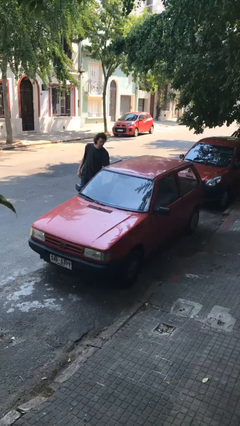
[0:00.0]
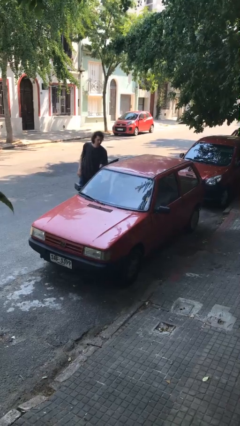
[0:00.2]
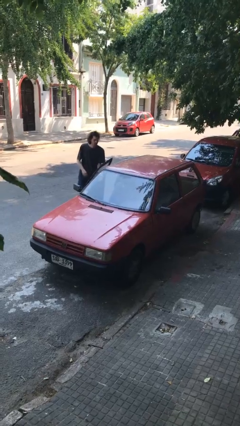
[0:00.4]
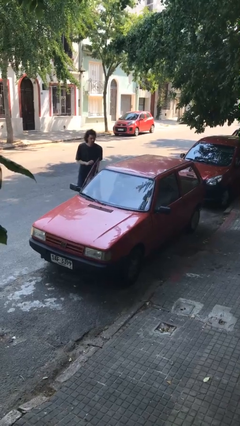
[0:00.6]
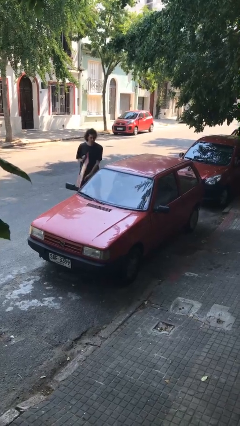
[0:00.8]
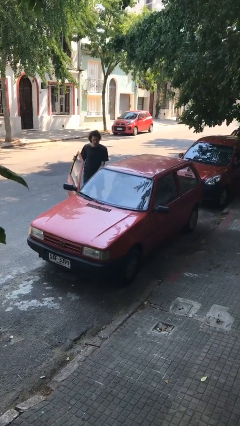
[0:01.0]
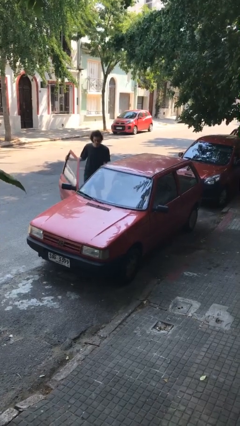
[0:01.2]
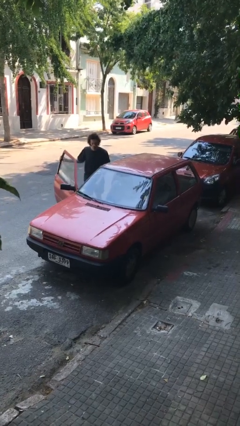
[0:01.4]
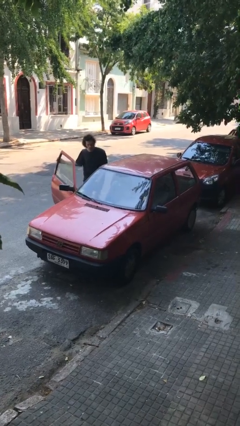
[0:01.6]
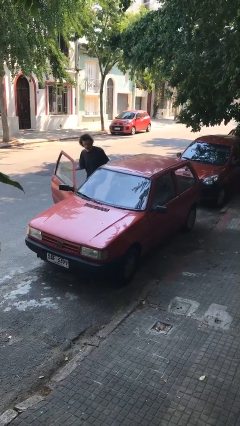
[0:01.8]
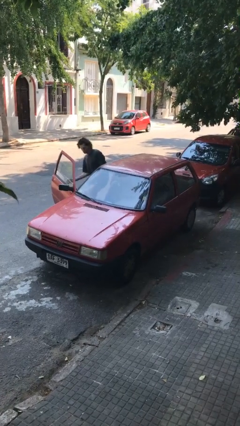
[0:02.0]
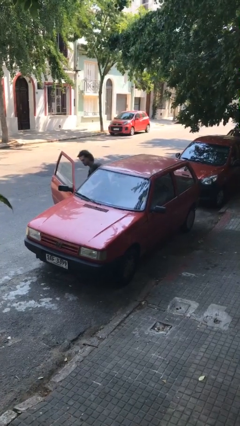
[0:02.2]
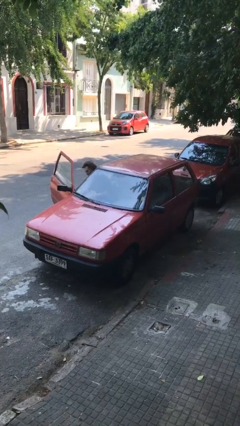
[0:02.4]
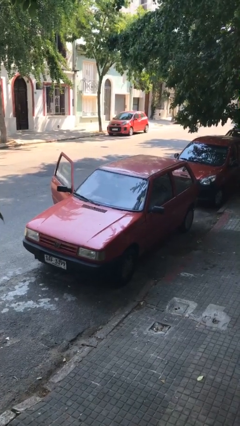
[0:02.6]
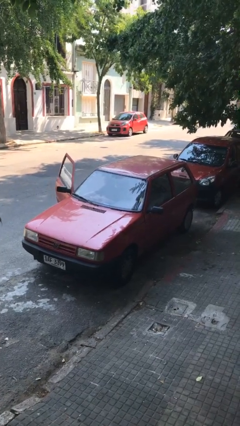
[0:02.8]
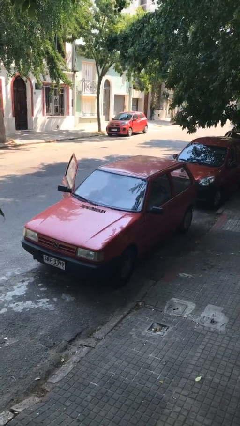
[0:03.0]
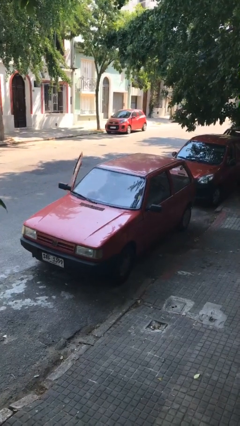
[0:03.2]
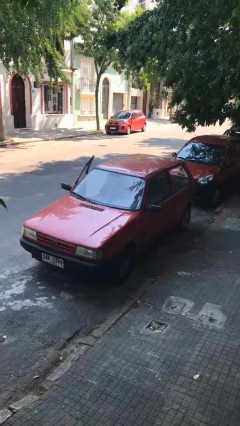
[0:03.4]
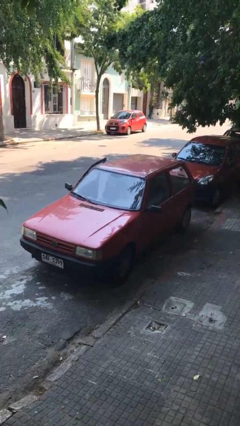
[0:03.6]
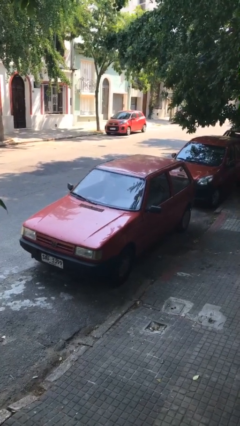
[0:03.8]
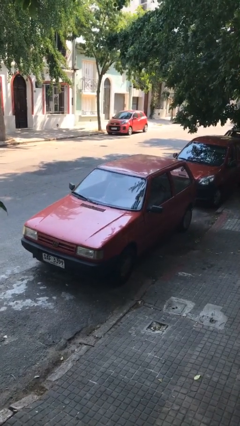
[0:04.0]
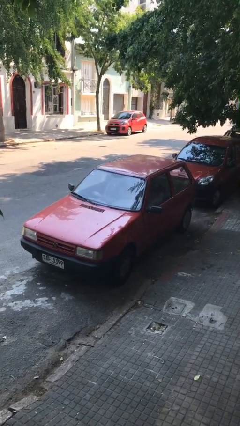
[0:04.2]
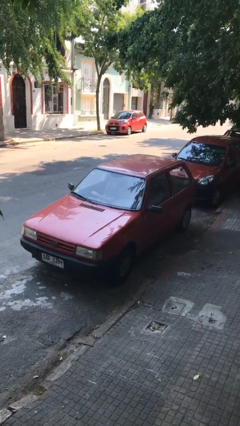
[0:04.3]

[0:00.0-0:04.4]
car picks up person

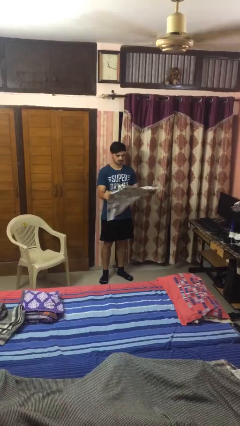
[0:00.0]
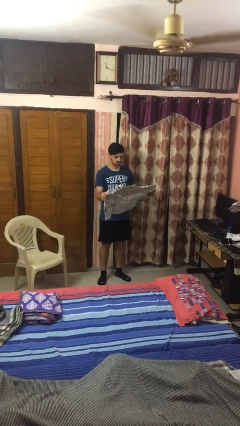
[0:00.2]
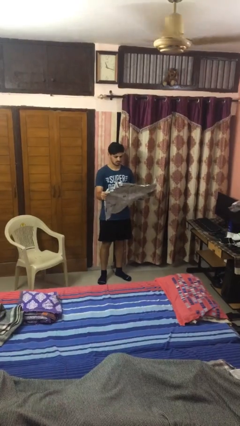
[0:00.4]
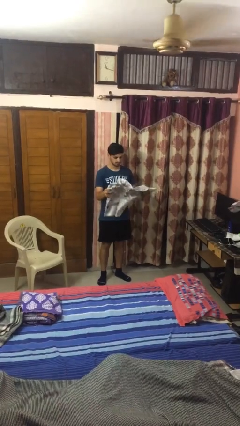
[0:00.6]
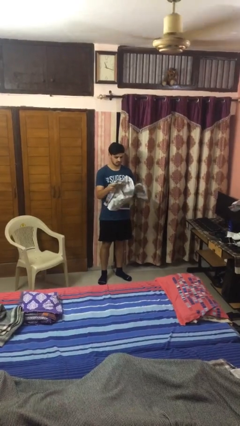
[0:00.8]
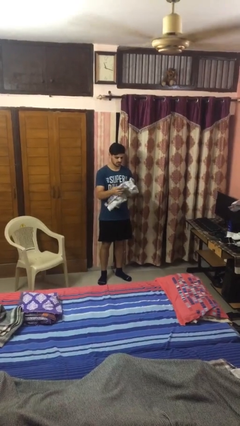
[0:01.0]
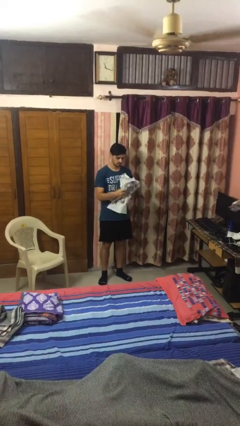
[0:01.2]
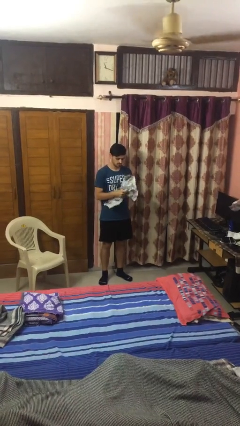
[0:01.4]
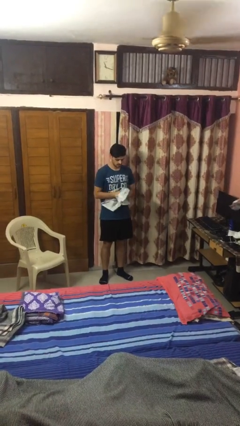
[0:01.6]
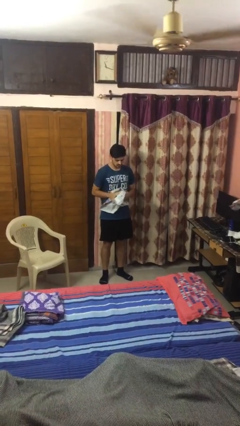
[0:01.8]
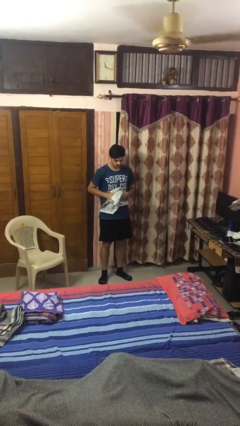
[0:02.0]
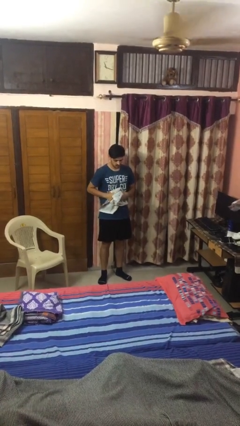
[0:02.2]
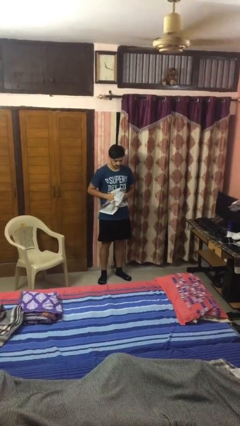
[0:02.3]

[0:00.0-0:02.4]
person crumples paper

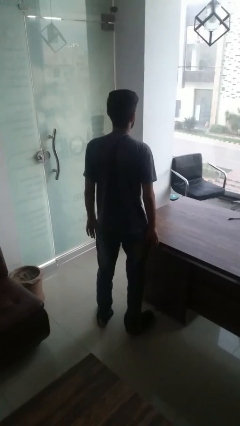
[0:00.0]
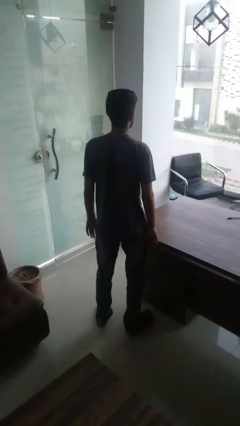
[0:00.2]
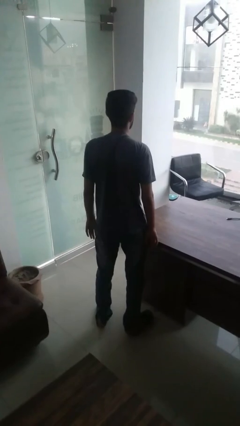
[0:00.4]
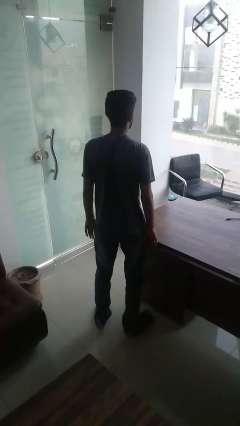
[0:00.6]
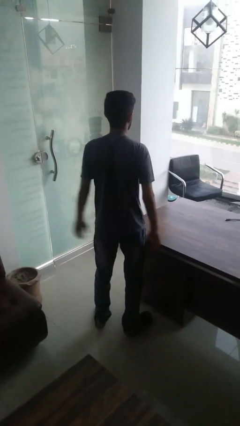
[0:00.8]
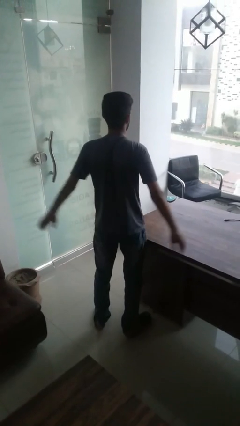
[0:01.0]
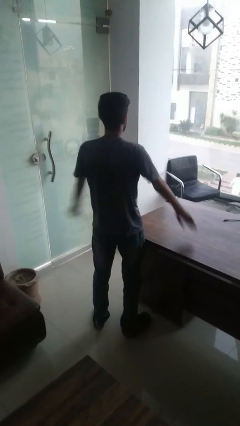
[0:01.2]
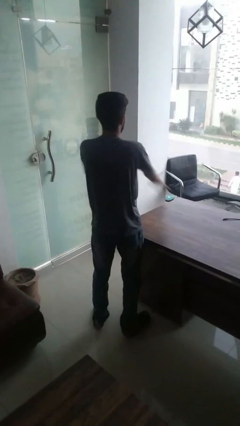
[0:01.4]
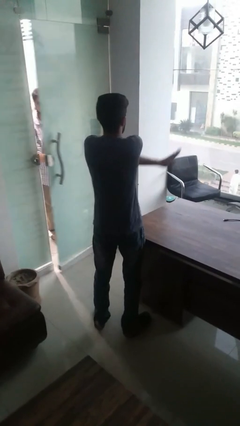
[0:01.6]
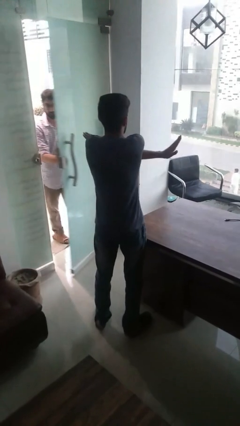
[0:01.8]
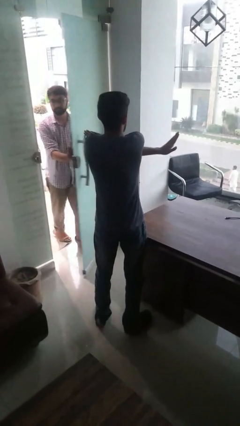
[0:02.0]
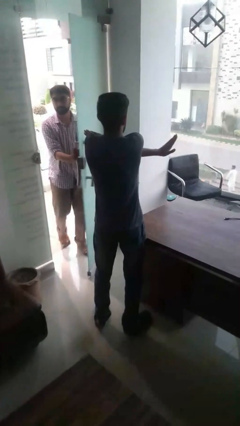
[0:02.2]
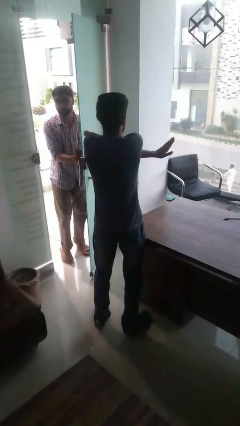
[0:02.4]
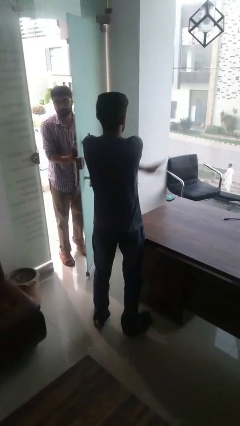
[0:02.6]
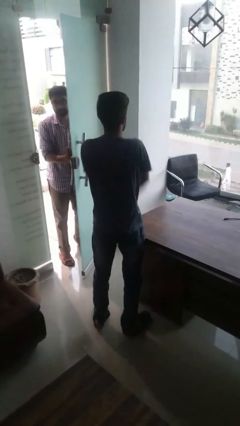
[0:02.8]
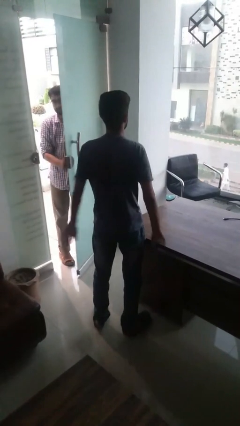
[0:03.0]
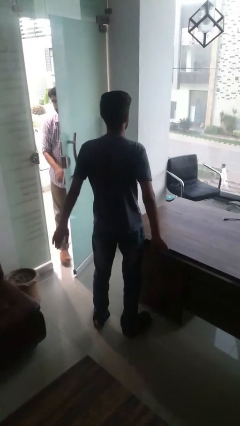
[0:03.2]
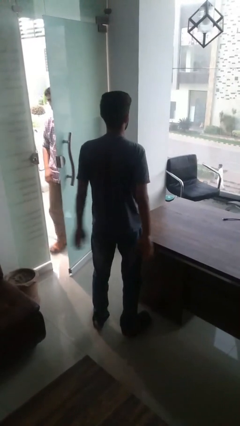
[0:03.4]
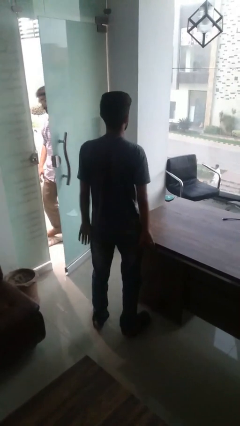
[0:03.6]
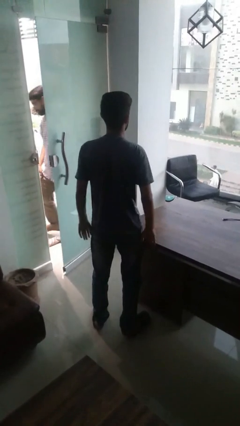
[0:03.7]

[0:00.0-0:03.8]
person gestures arms x

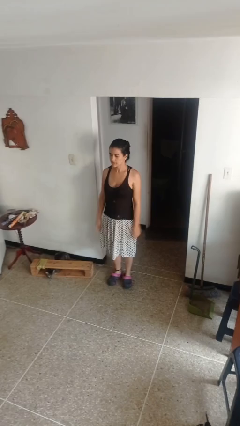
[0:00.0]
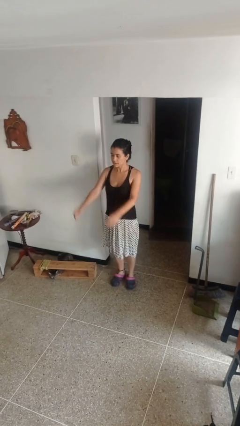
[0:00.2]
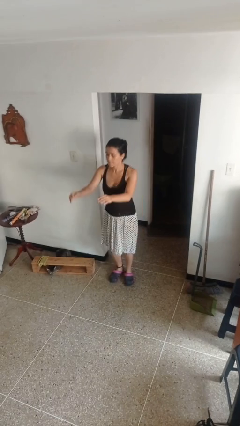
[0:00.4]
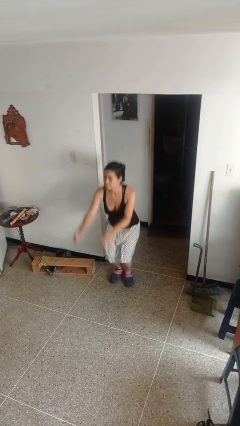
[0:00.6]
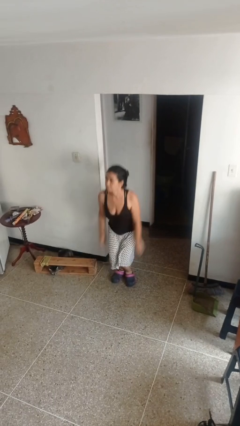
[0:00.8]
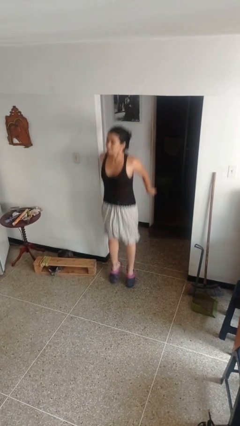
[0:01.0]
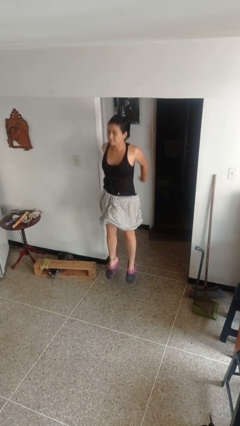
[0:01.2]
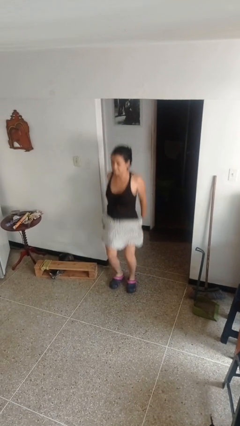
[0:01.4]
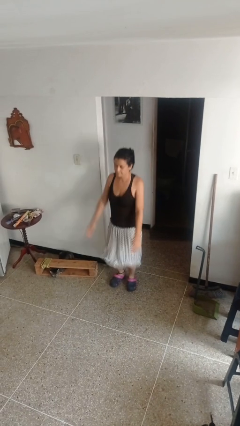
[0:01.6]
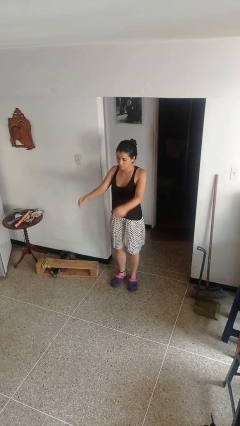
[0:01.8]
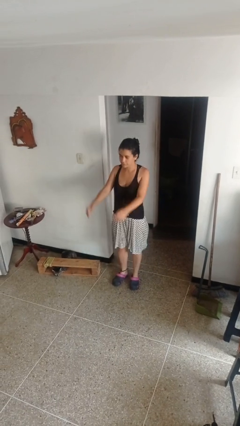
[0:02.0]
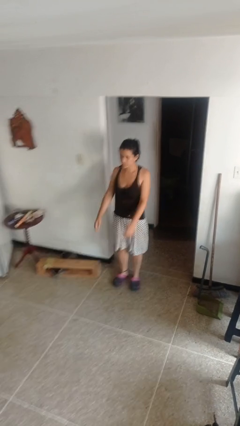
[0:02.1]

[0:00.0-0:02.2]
person jumps

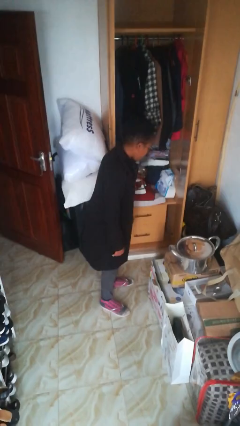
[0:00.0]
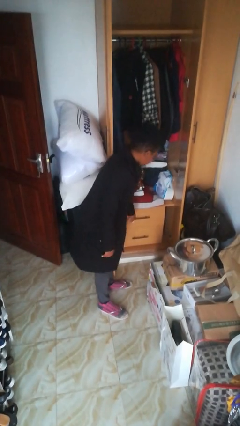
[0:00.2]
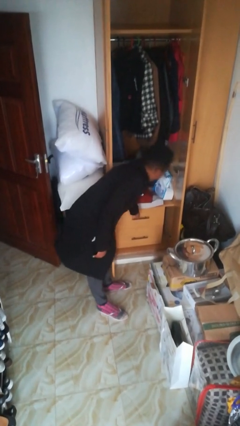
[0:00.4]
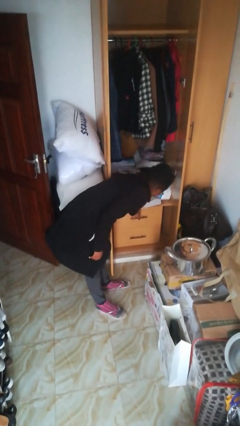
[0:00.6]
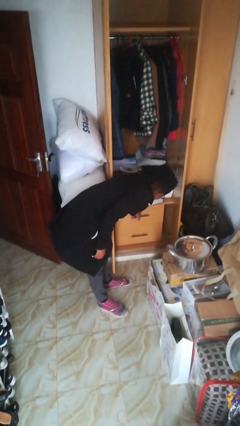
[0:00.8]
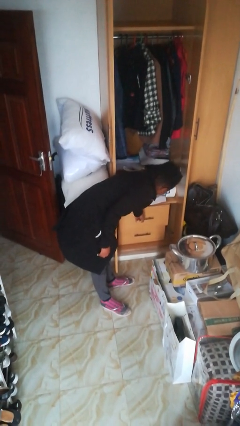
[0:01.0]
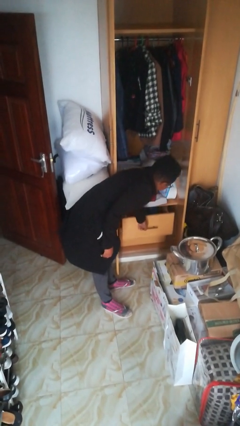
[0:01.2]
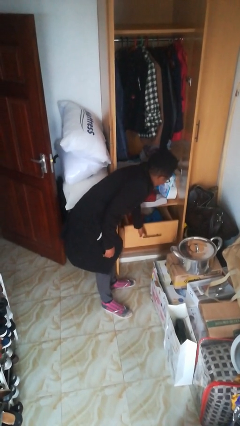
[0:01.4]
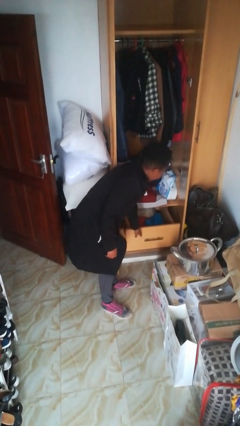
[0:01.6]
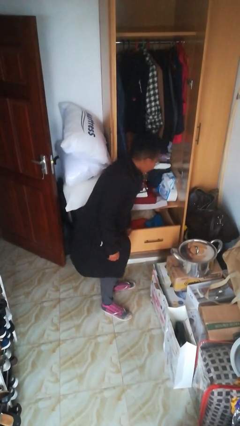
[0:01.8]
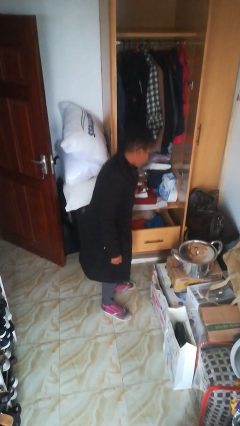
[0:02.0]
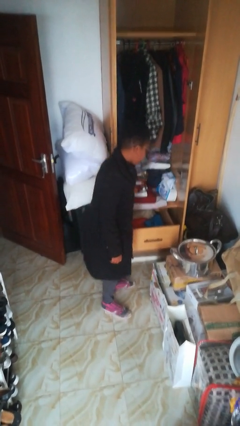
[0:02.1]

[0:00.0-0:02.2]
person opens dresser drawer

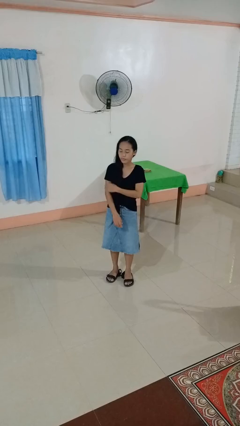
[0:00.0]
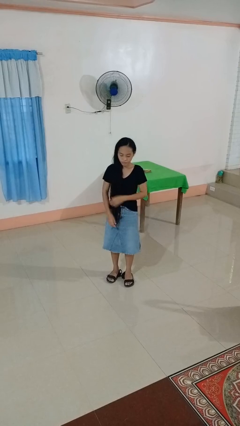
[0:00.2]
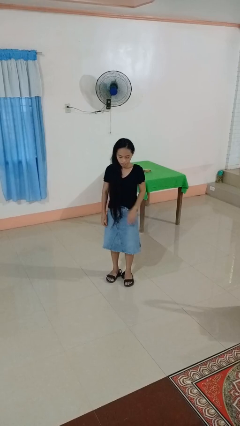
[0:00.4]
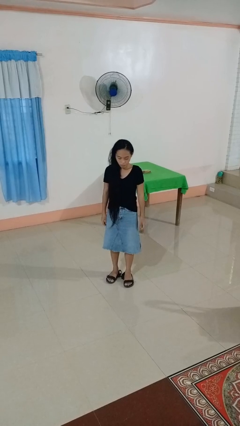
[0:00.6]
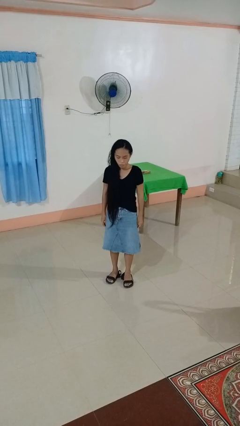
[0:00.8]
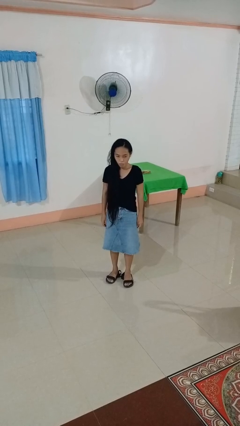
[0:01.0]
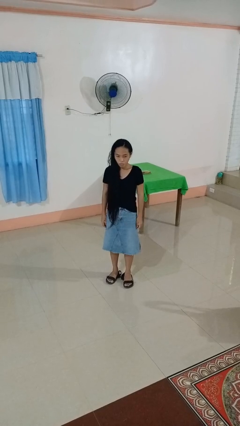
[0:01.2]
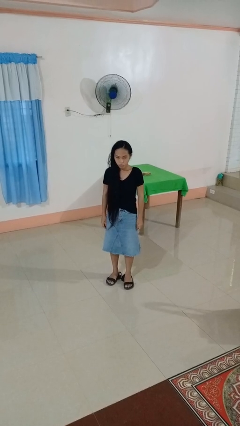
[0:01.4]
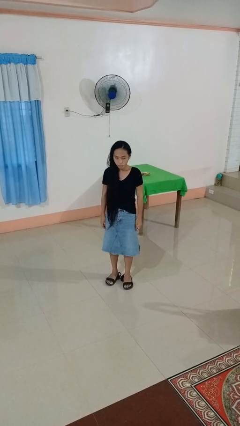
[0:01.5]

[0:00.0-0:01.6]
person swats bug

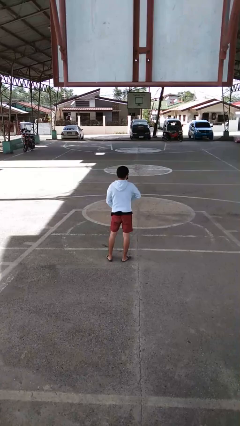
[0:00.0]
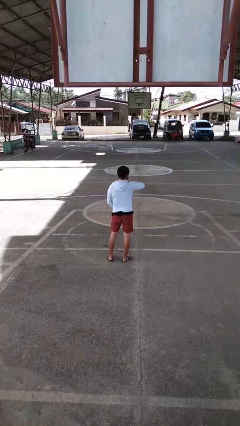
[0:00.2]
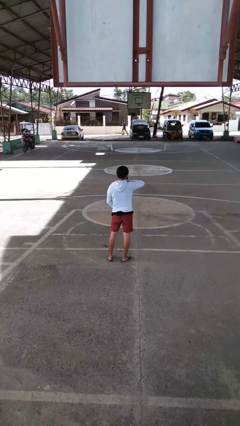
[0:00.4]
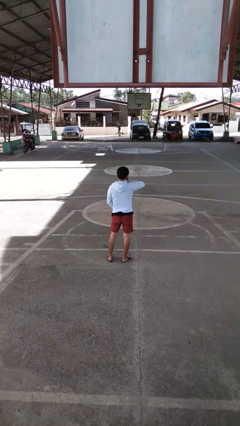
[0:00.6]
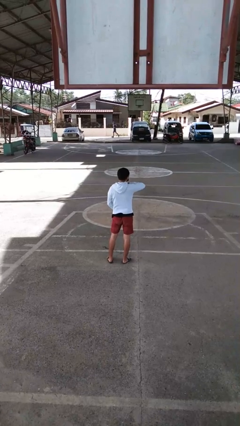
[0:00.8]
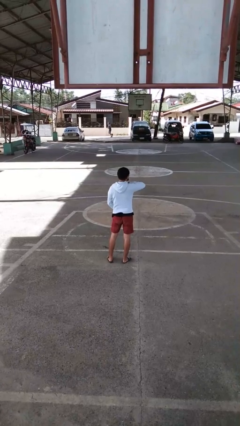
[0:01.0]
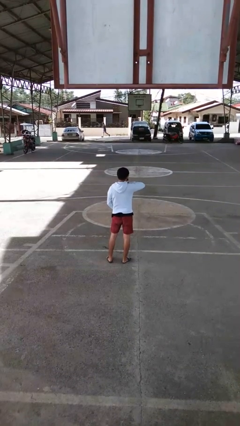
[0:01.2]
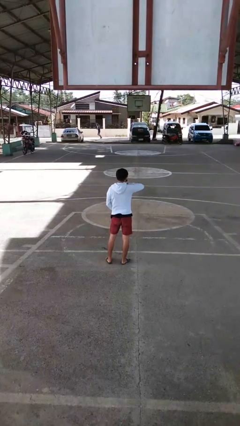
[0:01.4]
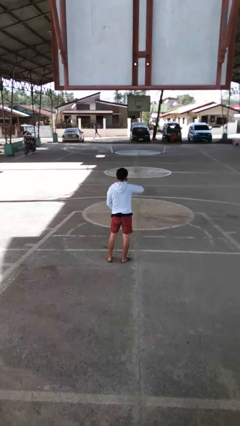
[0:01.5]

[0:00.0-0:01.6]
person zips up jacket
